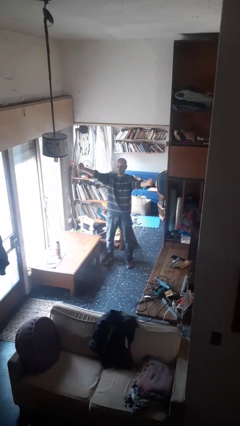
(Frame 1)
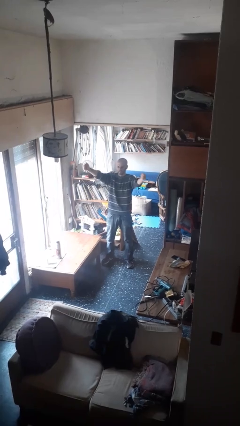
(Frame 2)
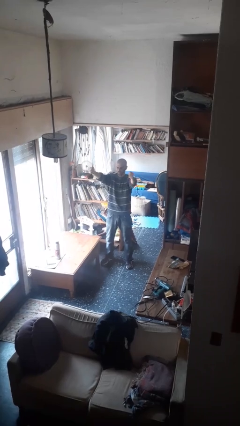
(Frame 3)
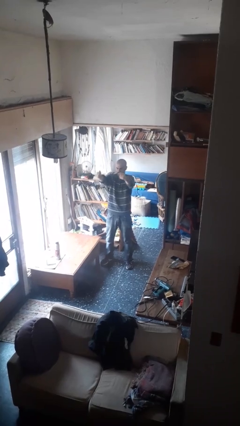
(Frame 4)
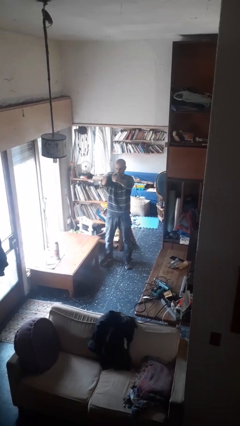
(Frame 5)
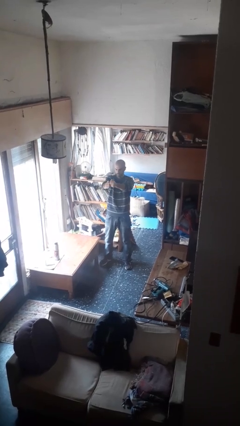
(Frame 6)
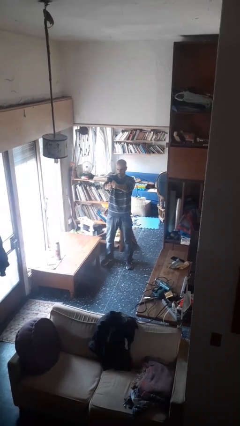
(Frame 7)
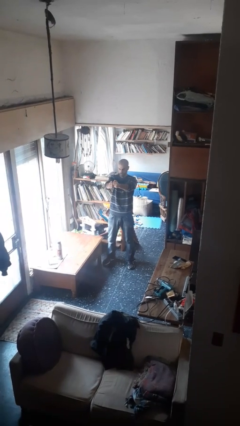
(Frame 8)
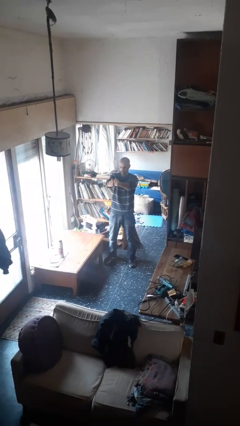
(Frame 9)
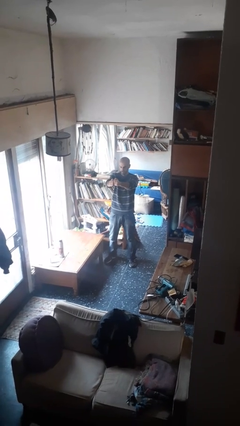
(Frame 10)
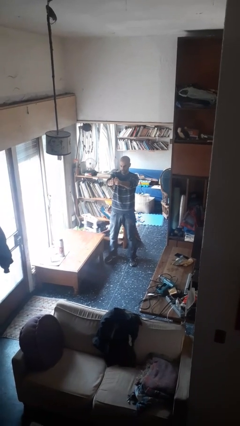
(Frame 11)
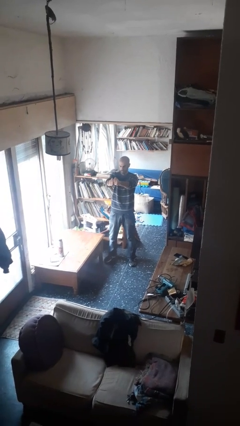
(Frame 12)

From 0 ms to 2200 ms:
person gestures zoom out

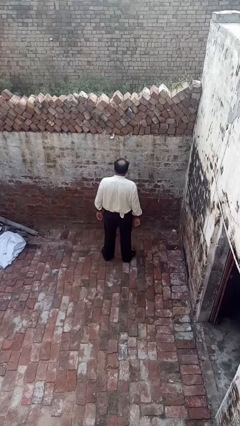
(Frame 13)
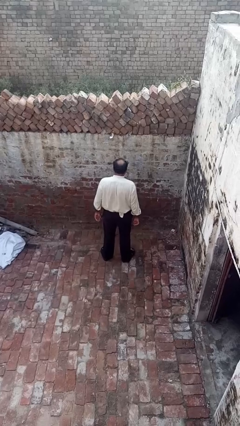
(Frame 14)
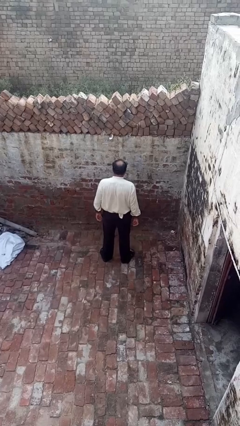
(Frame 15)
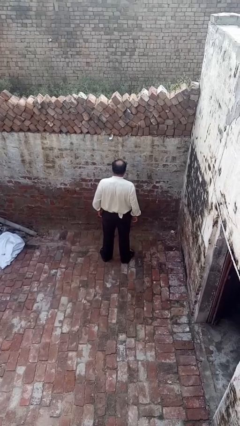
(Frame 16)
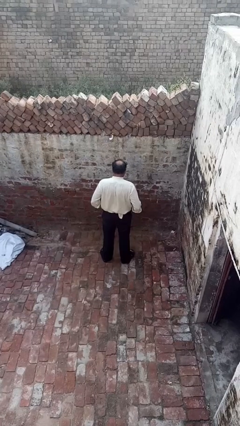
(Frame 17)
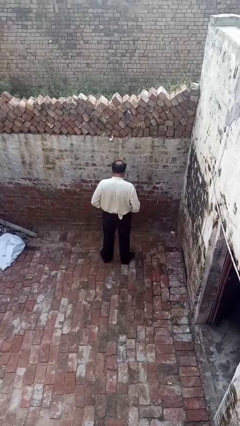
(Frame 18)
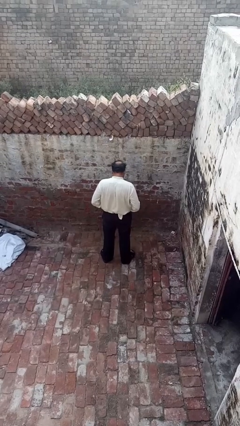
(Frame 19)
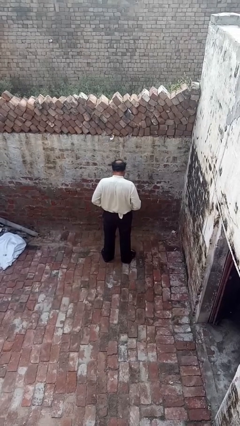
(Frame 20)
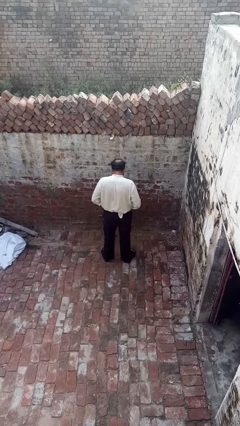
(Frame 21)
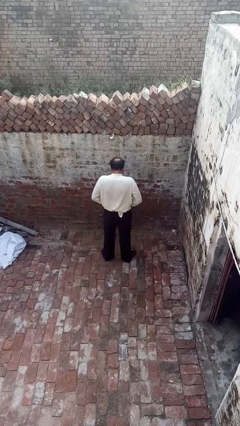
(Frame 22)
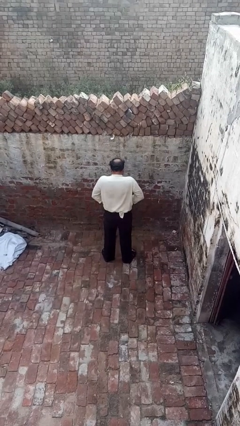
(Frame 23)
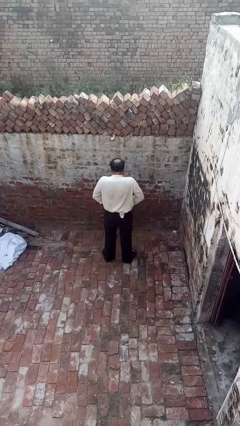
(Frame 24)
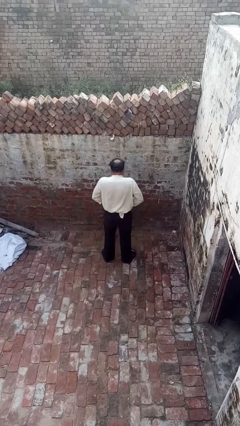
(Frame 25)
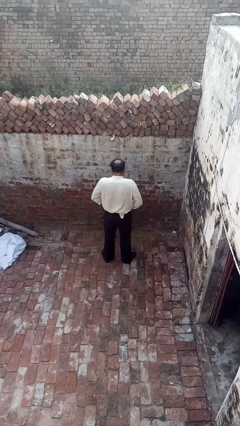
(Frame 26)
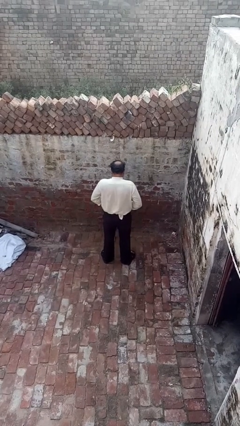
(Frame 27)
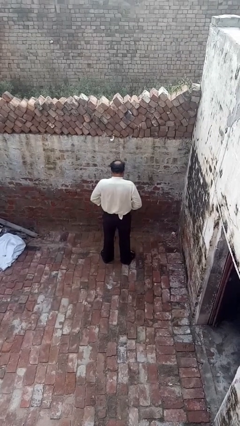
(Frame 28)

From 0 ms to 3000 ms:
person hikes up pants

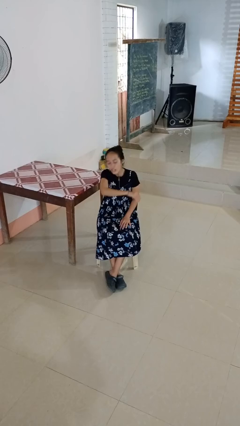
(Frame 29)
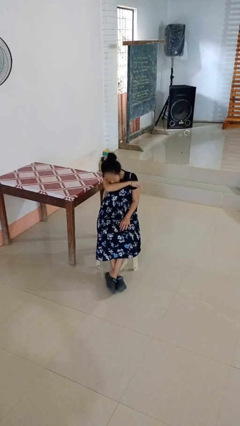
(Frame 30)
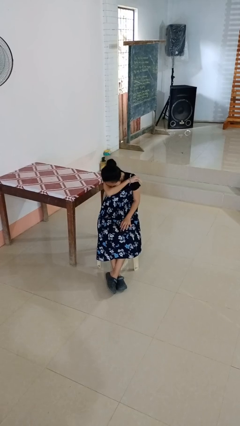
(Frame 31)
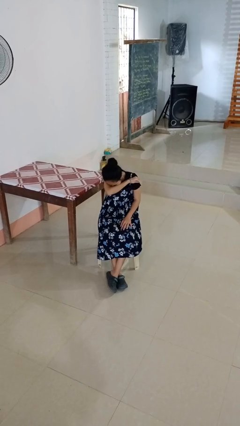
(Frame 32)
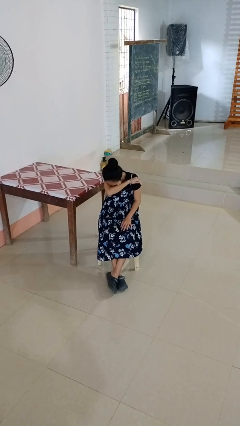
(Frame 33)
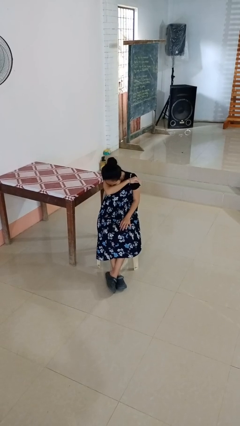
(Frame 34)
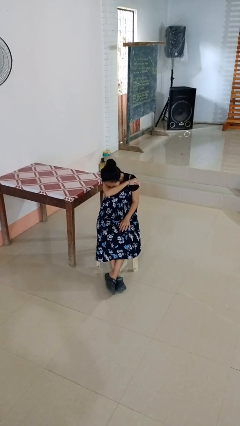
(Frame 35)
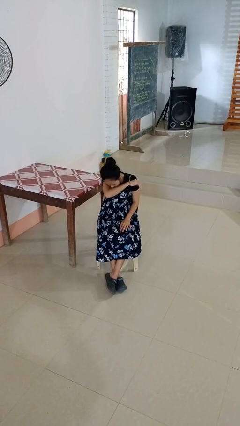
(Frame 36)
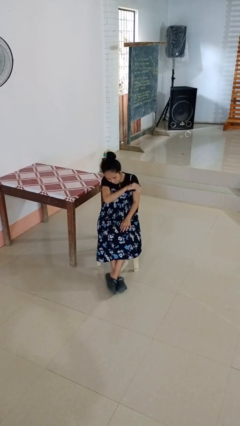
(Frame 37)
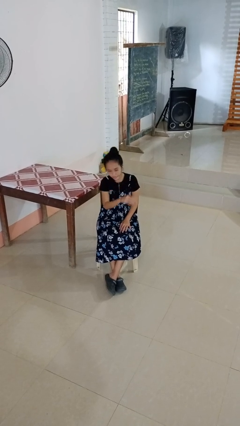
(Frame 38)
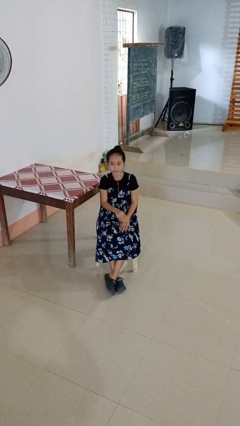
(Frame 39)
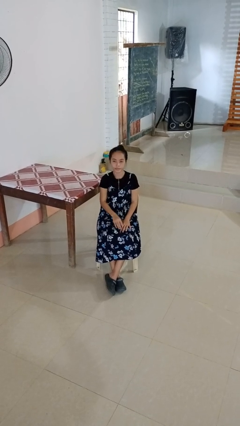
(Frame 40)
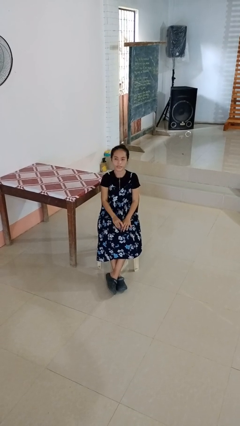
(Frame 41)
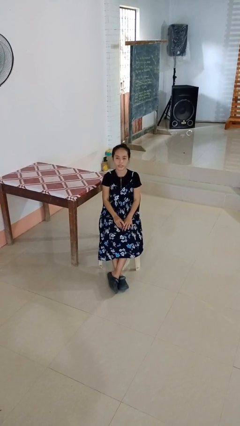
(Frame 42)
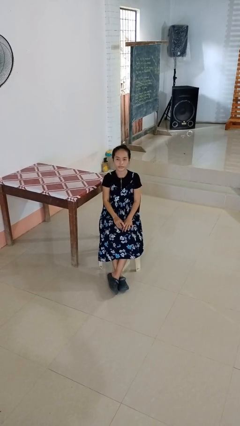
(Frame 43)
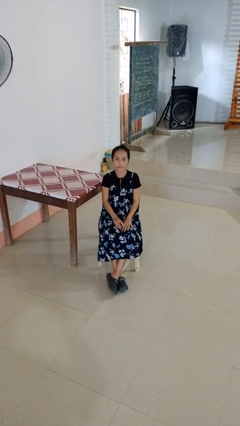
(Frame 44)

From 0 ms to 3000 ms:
person sneezes into arm

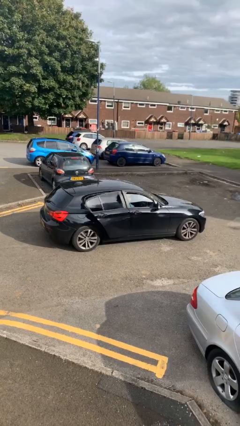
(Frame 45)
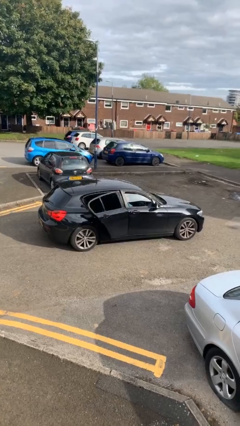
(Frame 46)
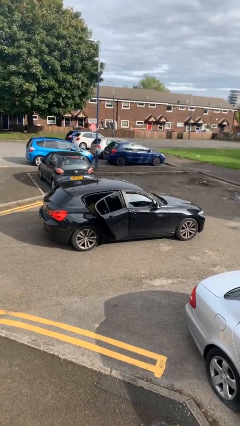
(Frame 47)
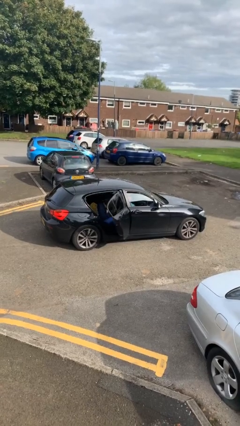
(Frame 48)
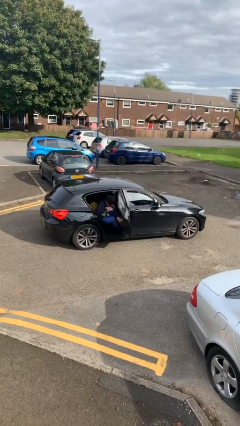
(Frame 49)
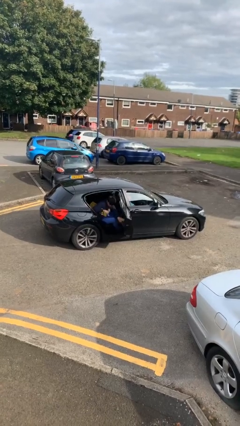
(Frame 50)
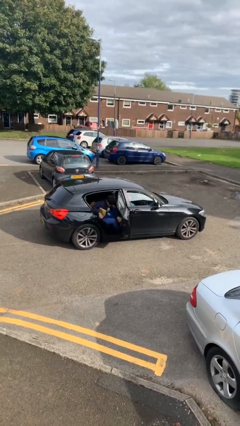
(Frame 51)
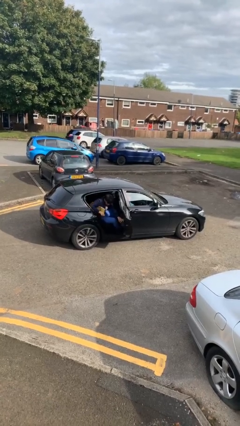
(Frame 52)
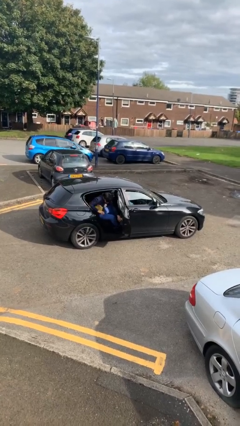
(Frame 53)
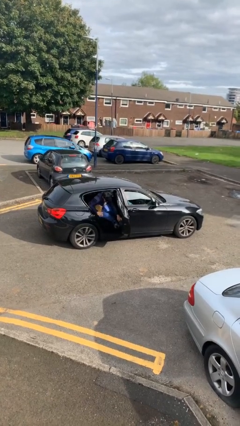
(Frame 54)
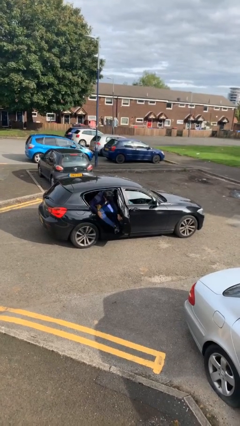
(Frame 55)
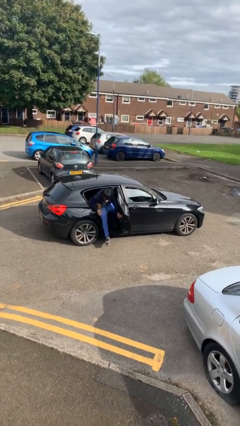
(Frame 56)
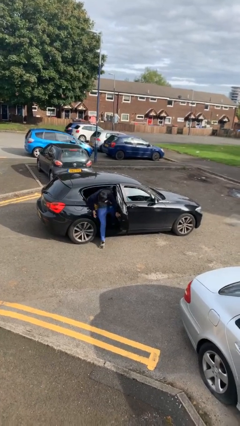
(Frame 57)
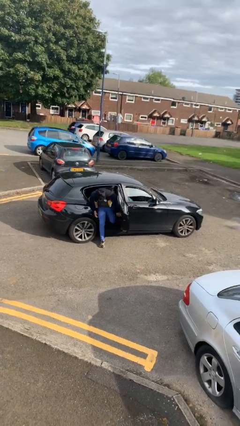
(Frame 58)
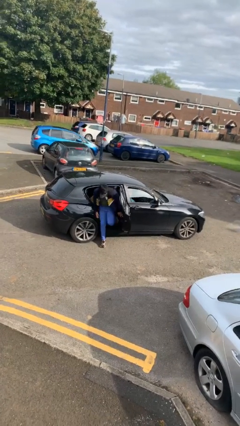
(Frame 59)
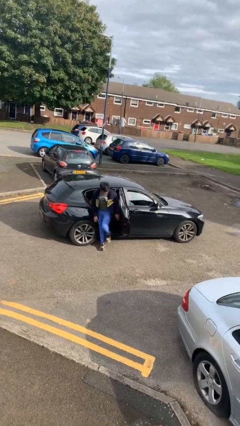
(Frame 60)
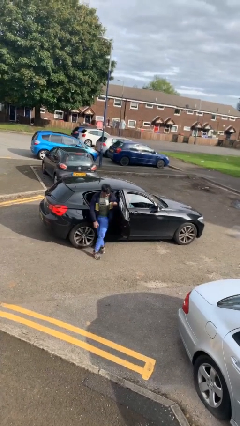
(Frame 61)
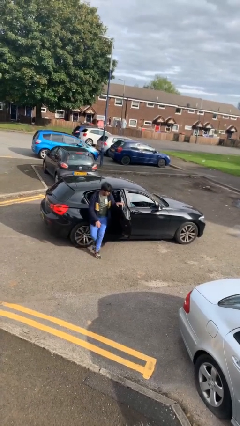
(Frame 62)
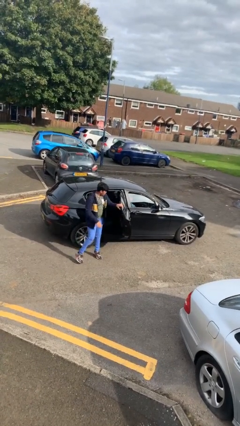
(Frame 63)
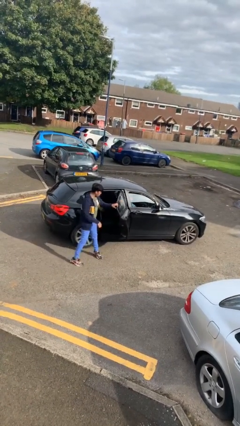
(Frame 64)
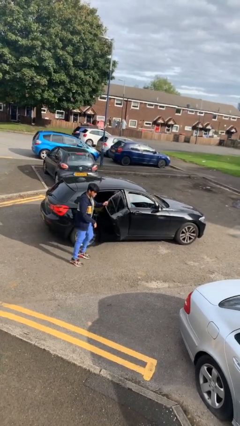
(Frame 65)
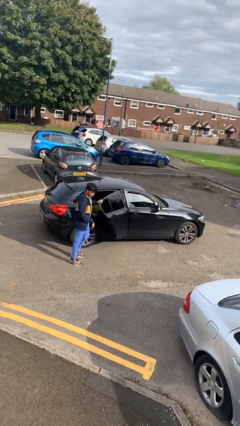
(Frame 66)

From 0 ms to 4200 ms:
car drops off person

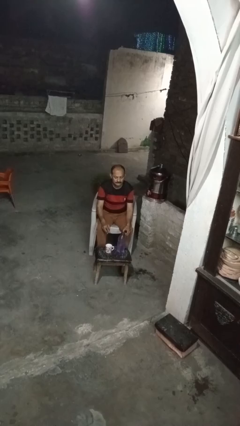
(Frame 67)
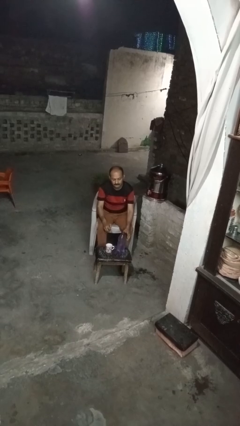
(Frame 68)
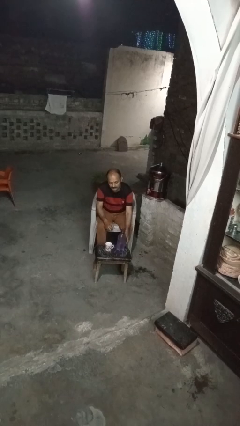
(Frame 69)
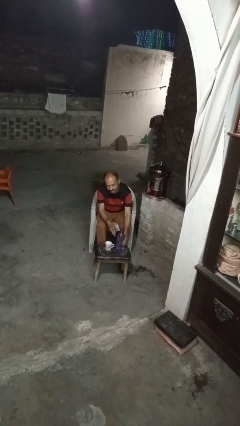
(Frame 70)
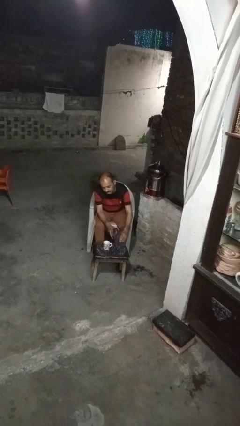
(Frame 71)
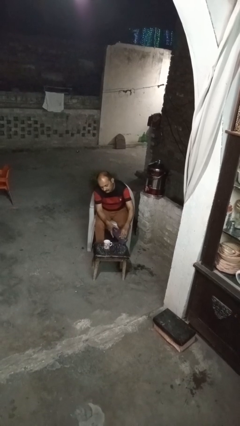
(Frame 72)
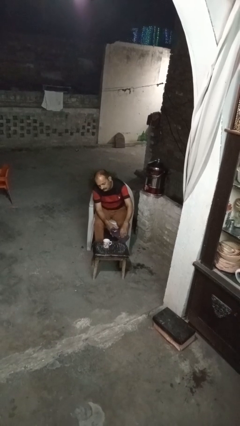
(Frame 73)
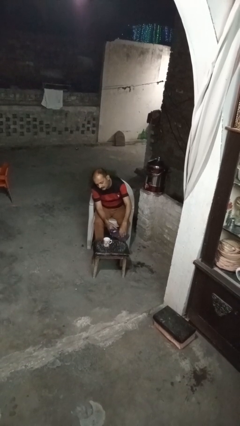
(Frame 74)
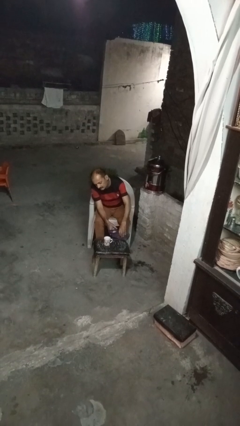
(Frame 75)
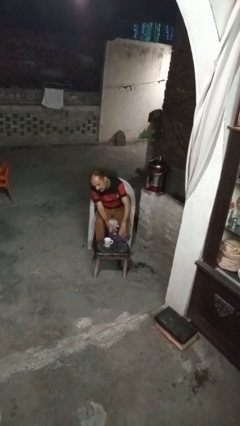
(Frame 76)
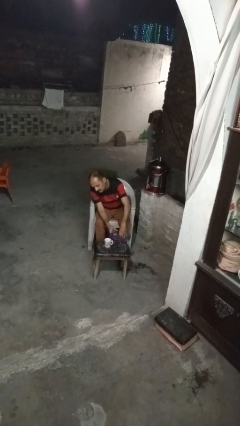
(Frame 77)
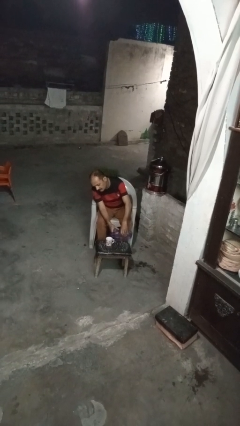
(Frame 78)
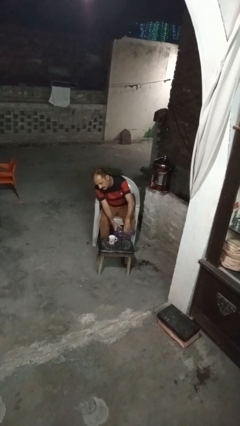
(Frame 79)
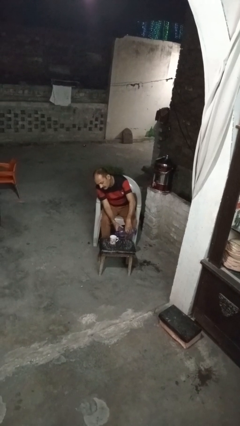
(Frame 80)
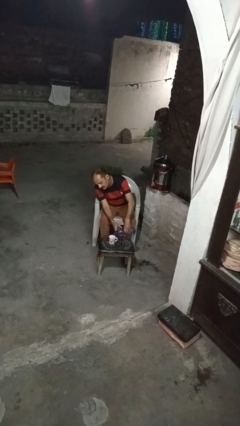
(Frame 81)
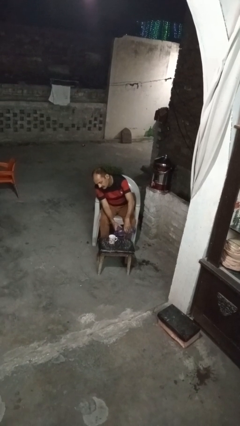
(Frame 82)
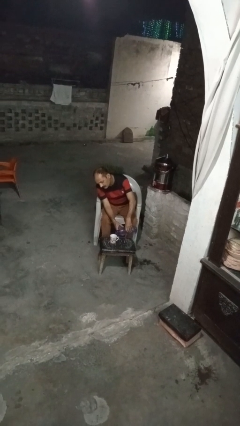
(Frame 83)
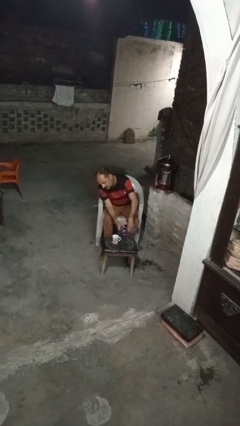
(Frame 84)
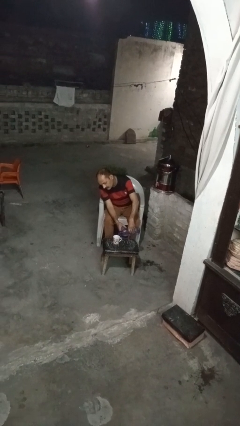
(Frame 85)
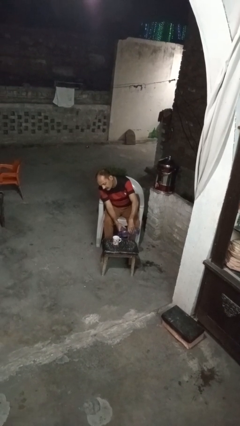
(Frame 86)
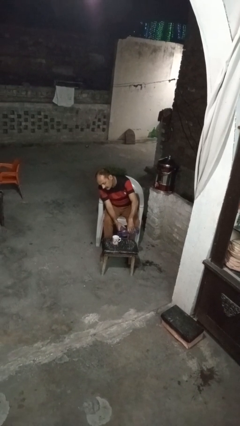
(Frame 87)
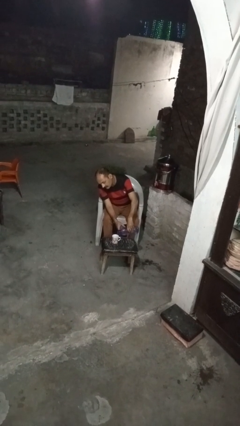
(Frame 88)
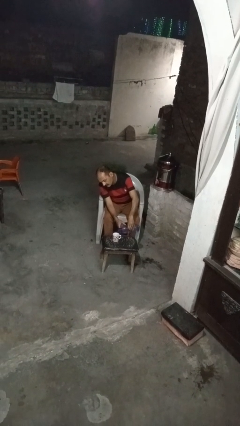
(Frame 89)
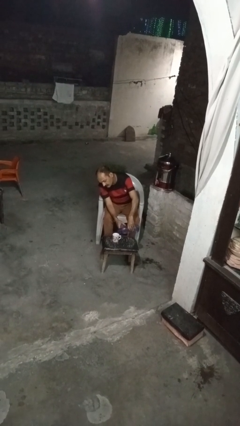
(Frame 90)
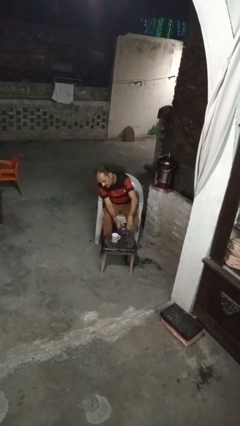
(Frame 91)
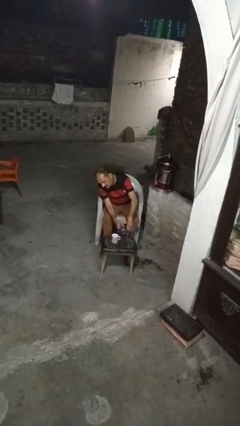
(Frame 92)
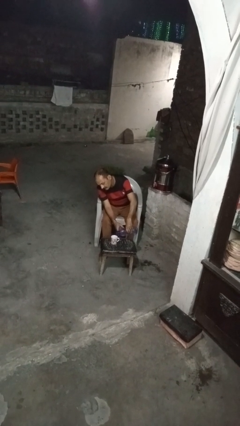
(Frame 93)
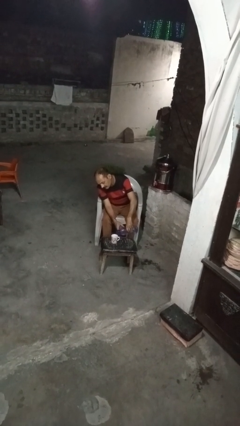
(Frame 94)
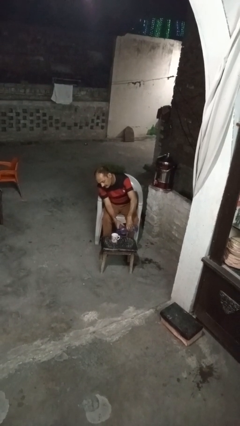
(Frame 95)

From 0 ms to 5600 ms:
person pours liquid into cup

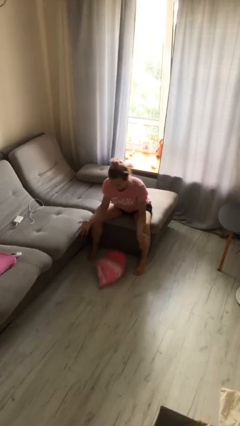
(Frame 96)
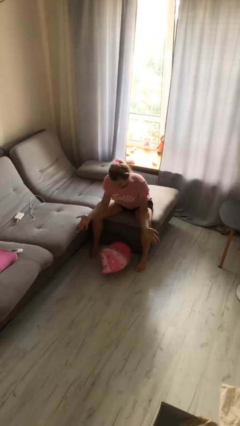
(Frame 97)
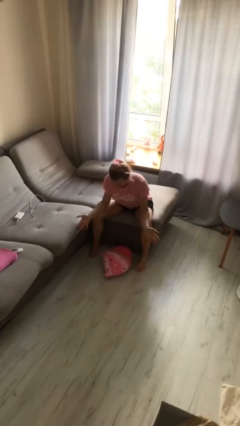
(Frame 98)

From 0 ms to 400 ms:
person drops object
